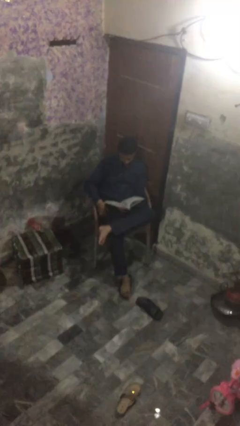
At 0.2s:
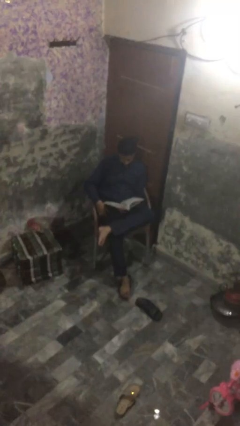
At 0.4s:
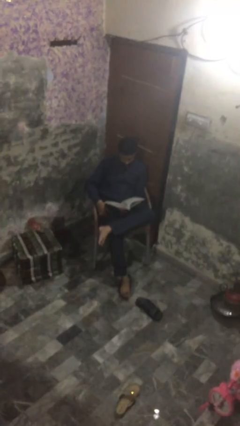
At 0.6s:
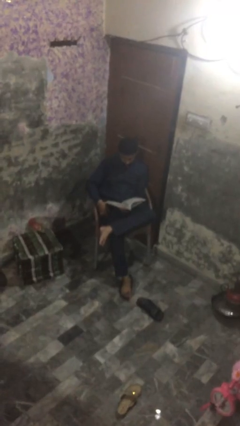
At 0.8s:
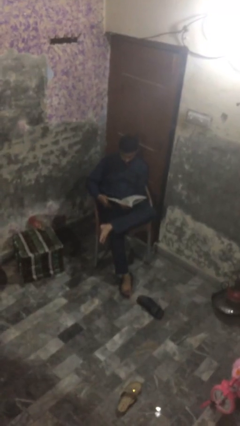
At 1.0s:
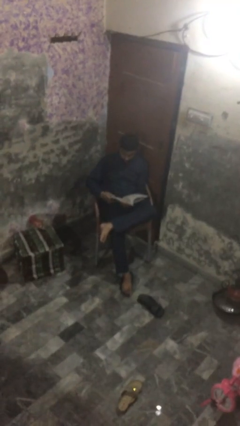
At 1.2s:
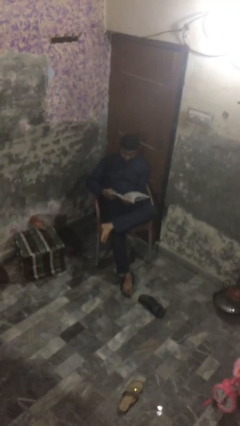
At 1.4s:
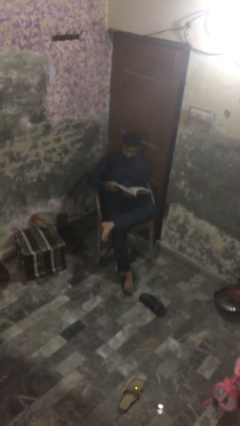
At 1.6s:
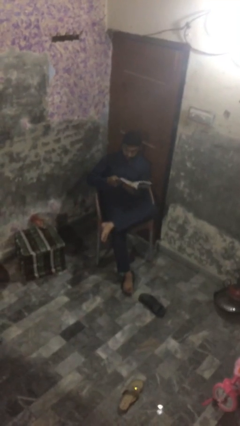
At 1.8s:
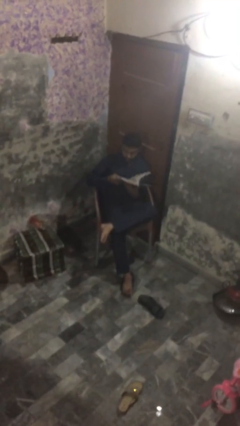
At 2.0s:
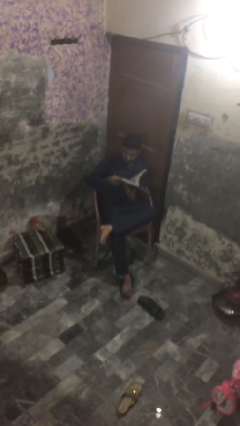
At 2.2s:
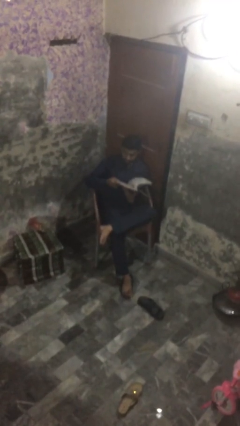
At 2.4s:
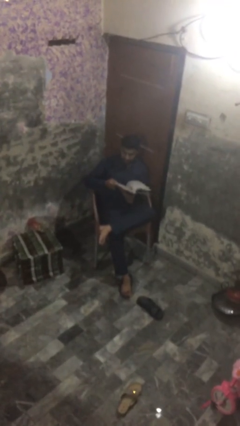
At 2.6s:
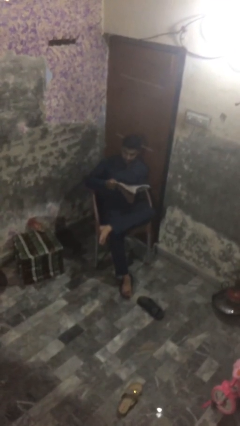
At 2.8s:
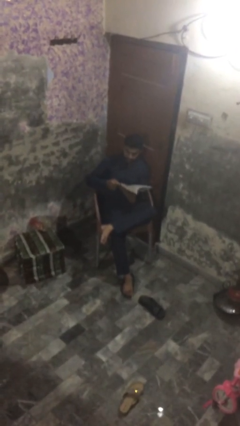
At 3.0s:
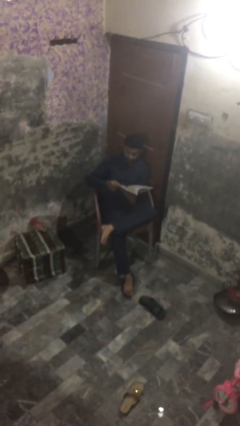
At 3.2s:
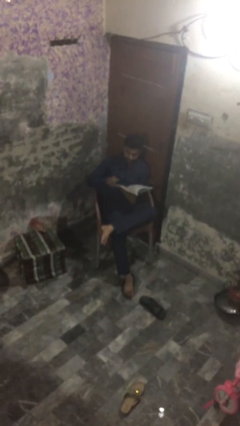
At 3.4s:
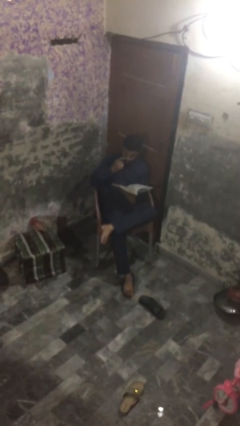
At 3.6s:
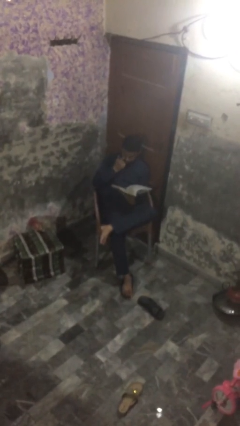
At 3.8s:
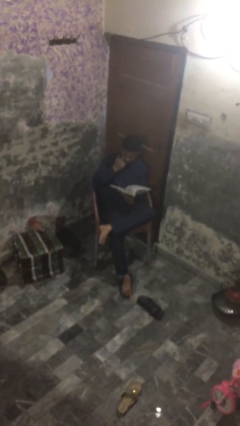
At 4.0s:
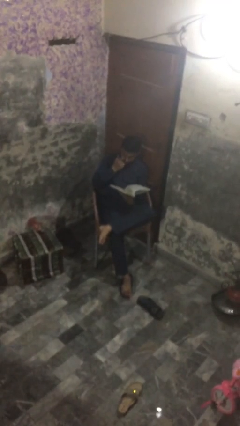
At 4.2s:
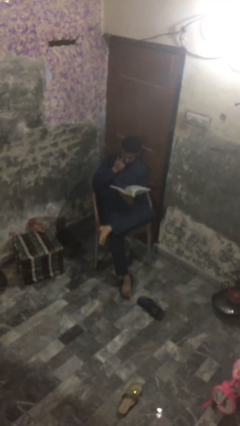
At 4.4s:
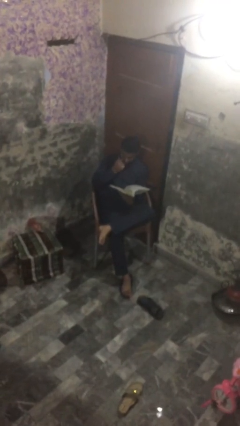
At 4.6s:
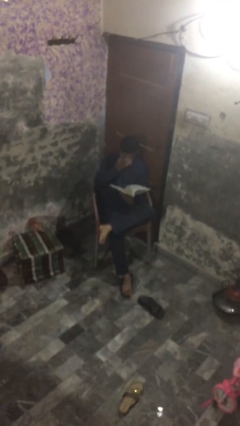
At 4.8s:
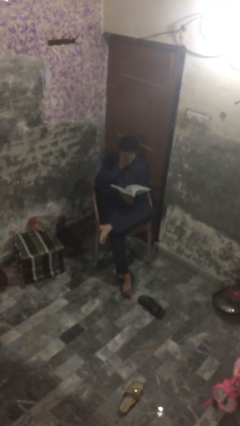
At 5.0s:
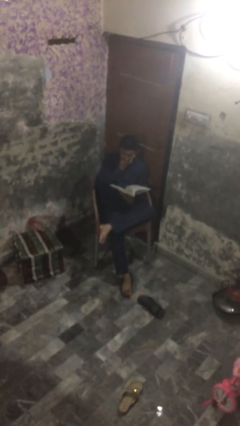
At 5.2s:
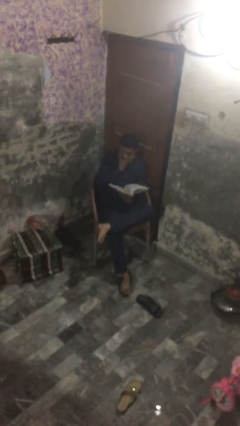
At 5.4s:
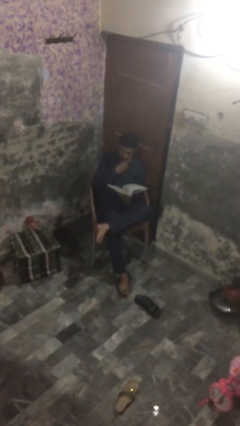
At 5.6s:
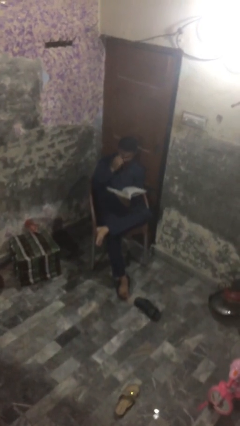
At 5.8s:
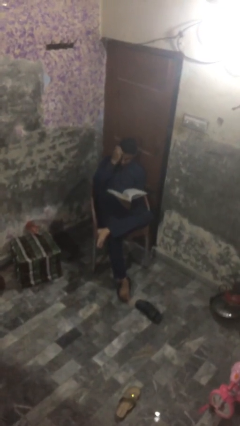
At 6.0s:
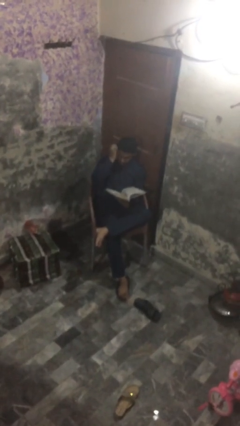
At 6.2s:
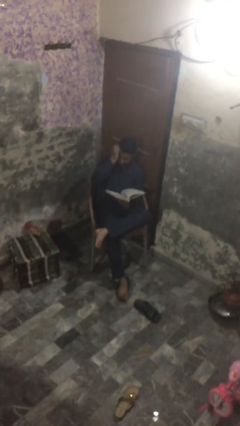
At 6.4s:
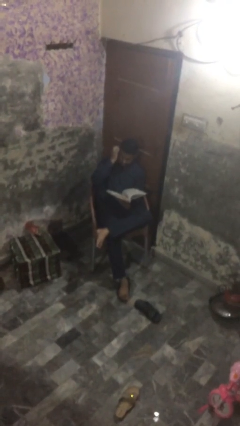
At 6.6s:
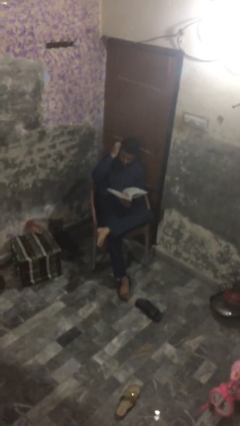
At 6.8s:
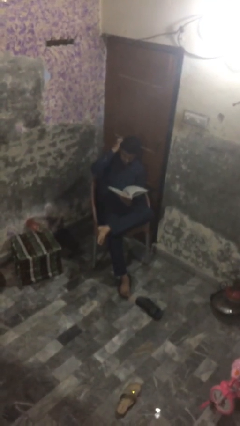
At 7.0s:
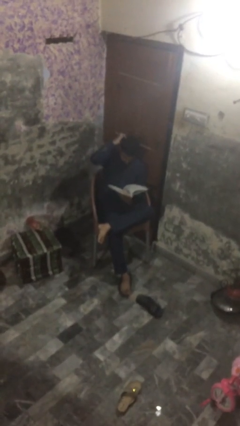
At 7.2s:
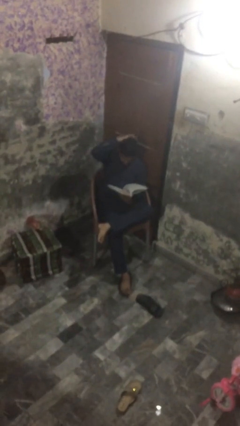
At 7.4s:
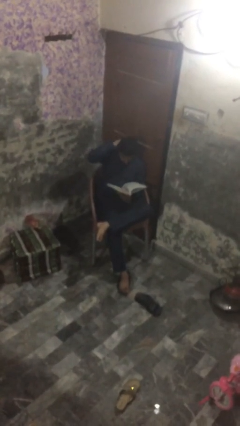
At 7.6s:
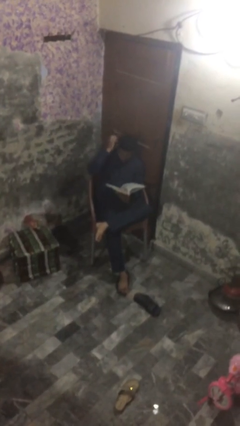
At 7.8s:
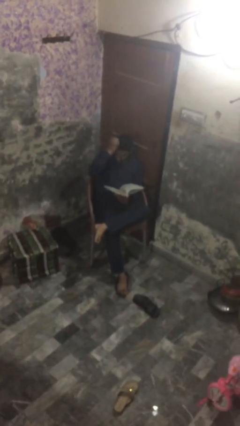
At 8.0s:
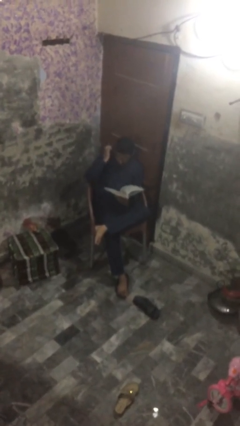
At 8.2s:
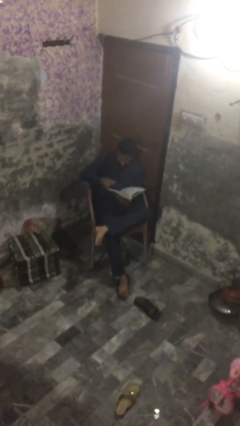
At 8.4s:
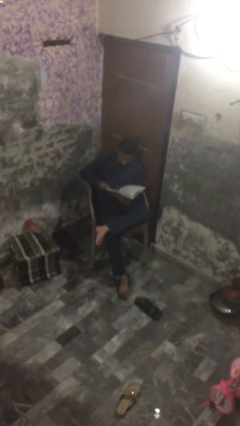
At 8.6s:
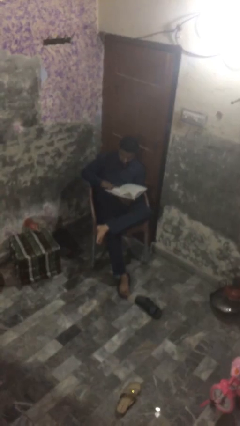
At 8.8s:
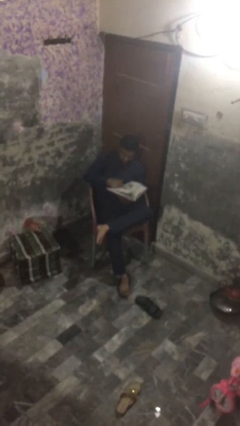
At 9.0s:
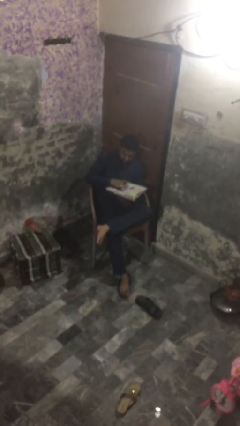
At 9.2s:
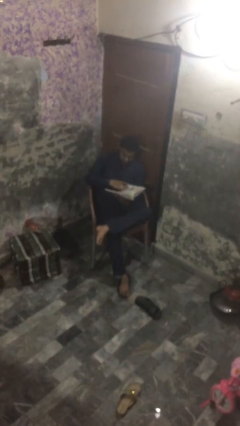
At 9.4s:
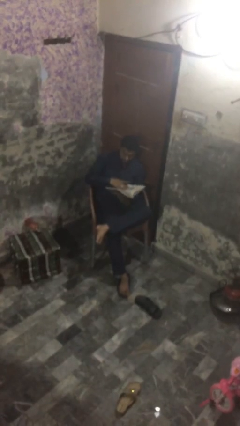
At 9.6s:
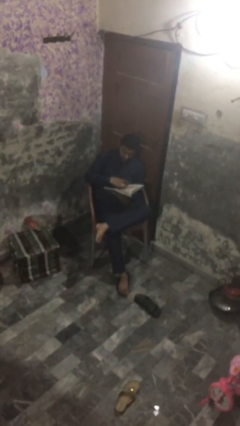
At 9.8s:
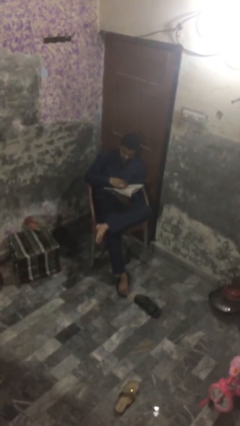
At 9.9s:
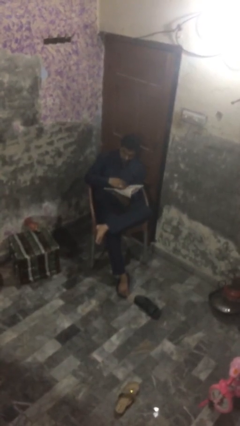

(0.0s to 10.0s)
person reads document

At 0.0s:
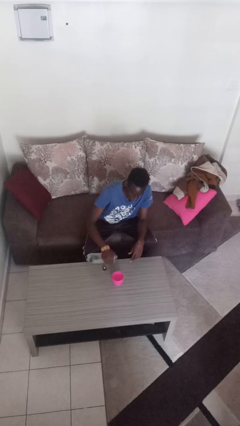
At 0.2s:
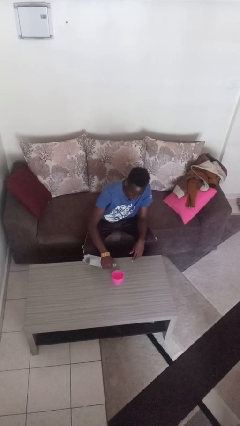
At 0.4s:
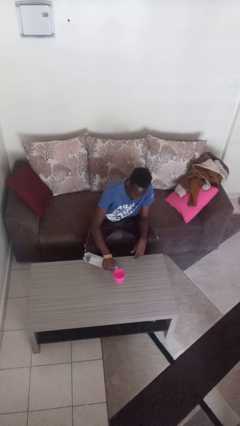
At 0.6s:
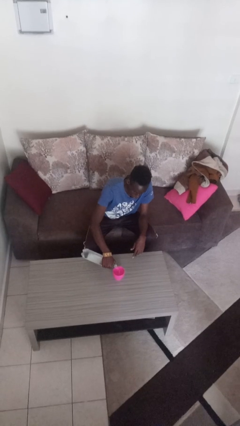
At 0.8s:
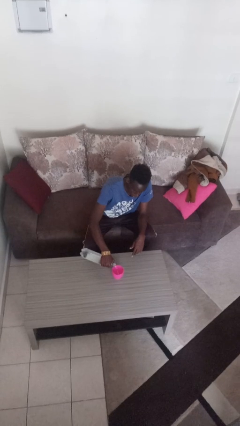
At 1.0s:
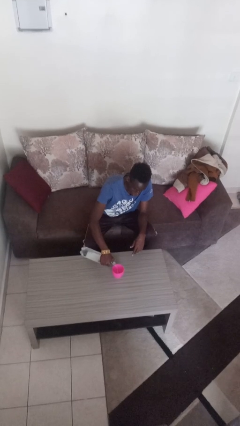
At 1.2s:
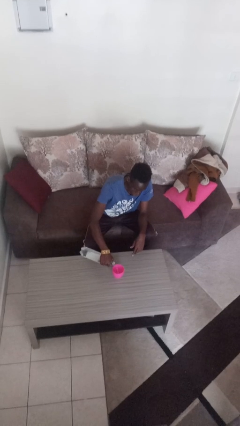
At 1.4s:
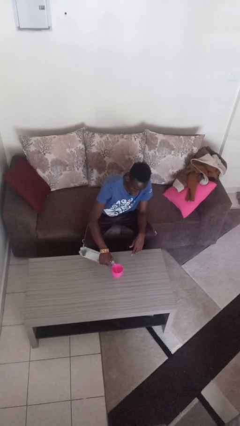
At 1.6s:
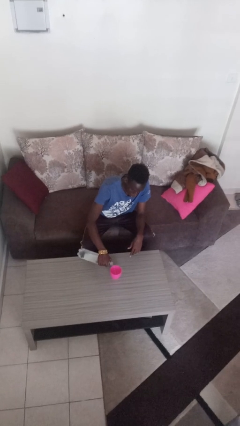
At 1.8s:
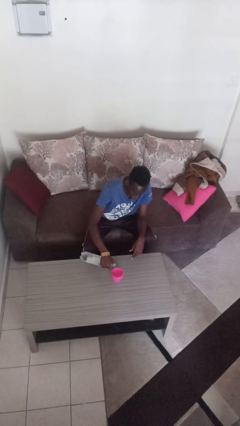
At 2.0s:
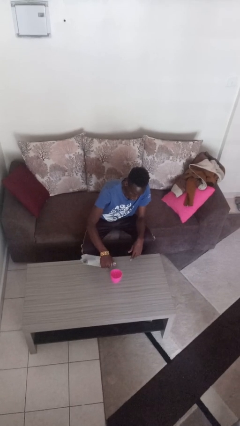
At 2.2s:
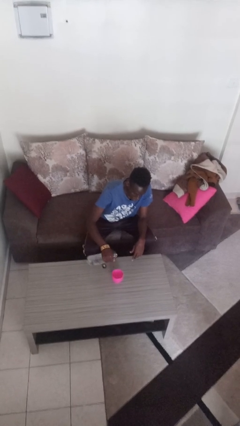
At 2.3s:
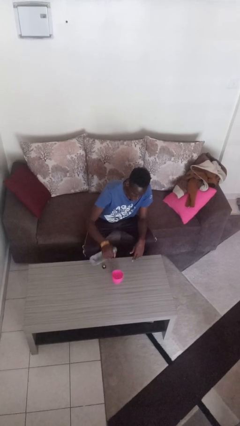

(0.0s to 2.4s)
person pours liquid into cup

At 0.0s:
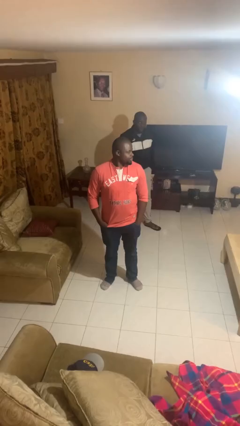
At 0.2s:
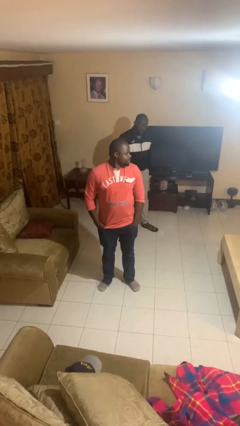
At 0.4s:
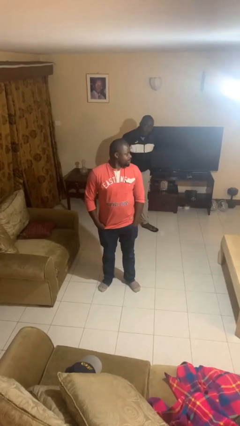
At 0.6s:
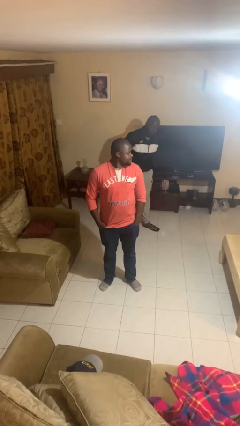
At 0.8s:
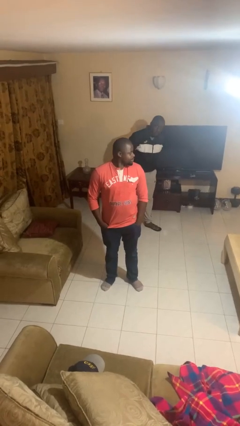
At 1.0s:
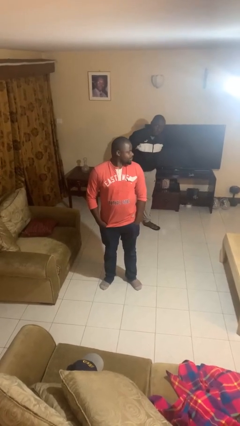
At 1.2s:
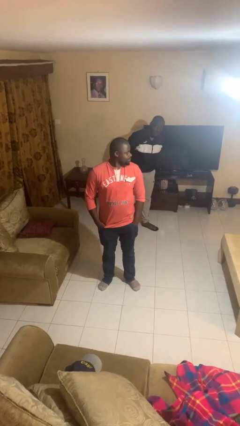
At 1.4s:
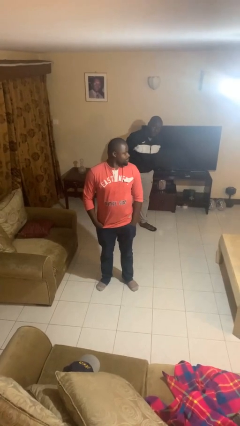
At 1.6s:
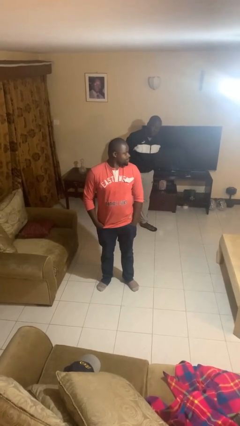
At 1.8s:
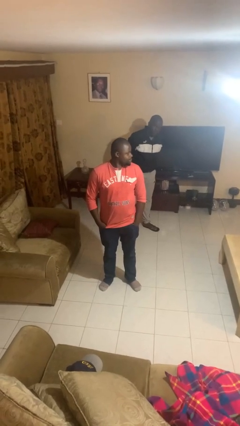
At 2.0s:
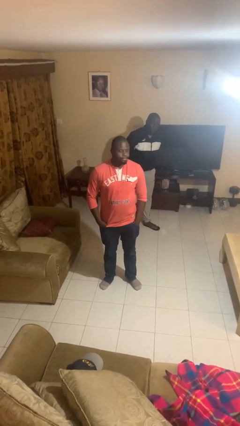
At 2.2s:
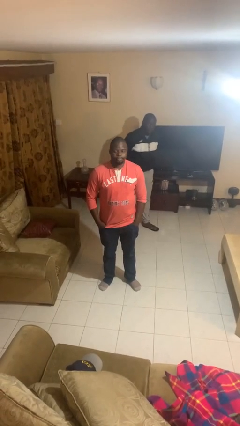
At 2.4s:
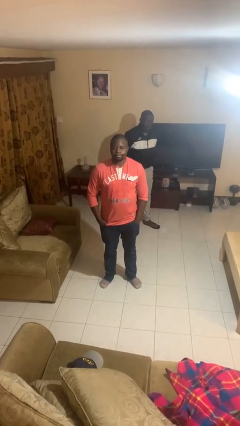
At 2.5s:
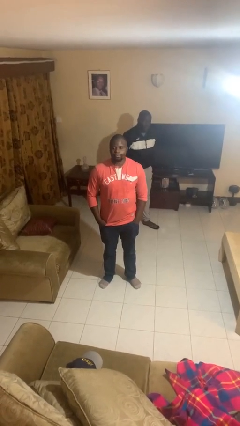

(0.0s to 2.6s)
person looks over shoulder

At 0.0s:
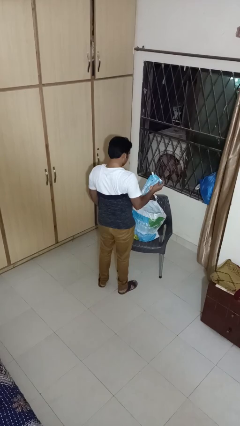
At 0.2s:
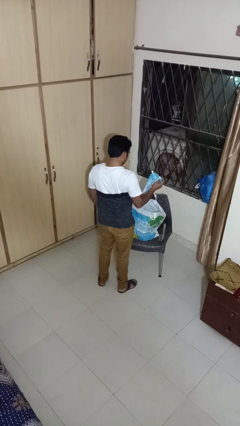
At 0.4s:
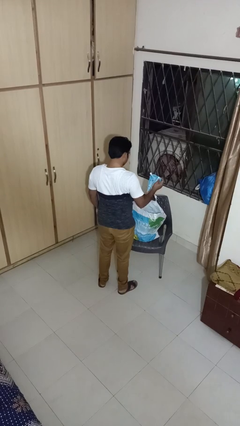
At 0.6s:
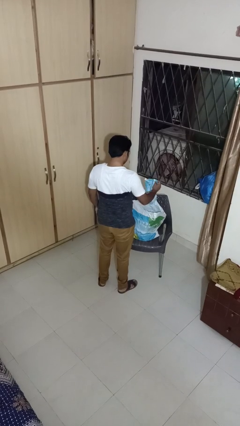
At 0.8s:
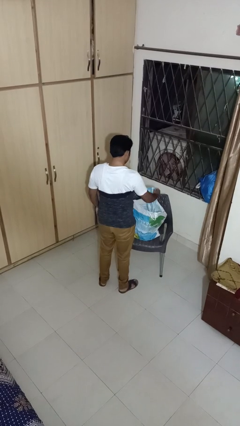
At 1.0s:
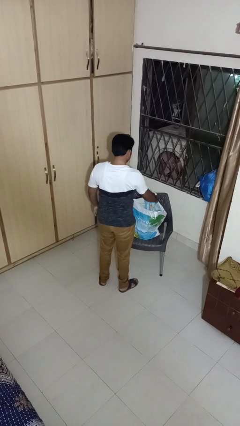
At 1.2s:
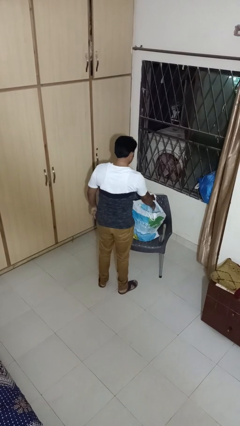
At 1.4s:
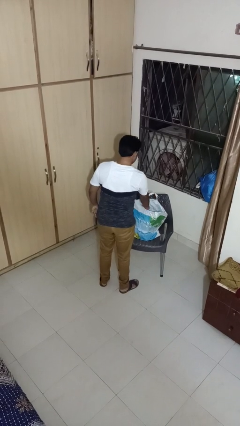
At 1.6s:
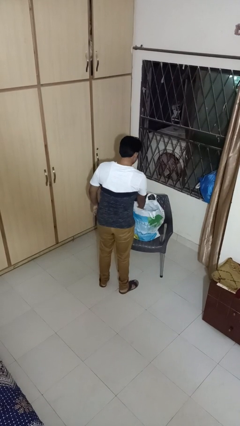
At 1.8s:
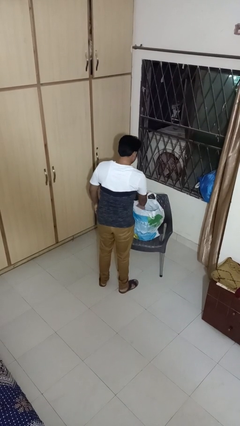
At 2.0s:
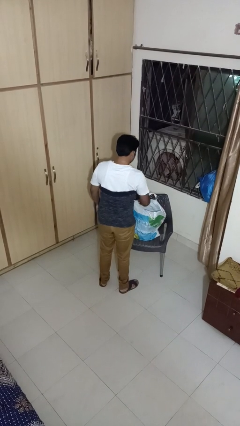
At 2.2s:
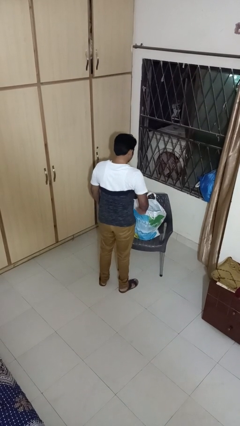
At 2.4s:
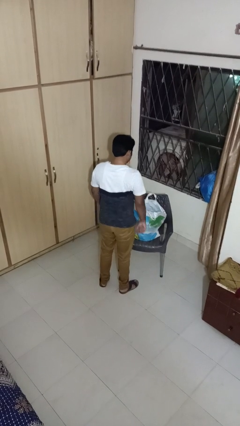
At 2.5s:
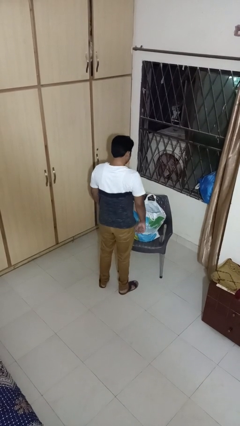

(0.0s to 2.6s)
person puts object into bag
